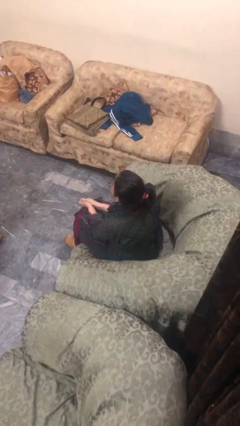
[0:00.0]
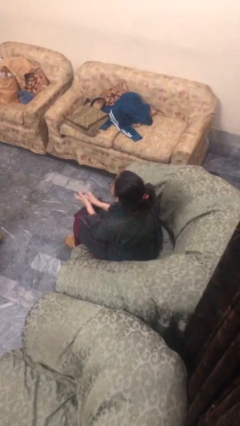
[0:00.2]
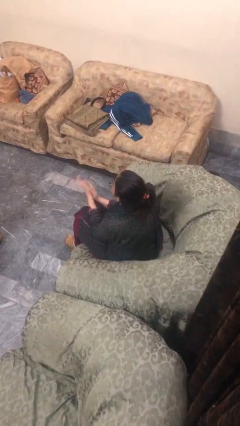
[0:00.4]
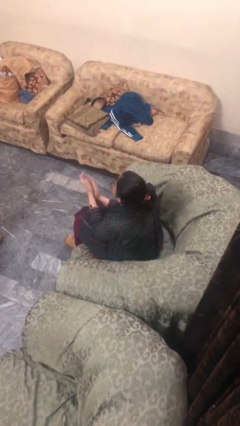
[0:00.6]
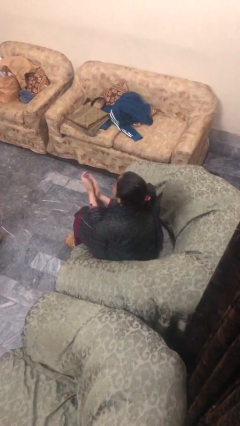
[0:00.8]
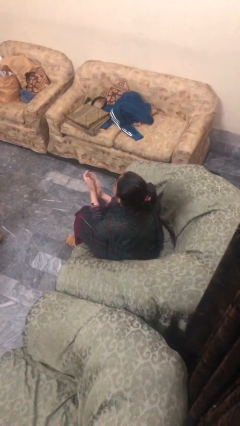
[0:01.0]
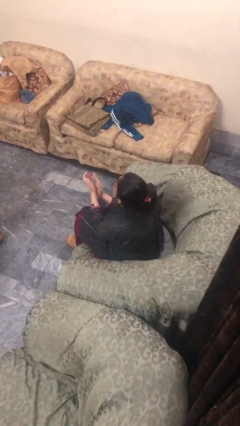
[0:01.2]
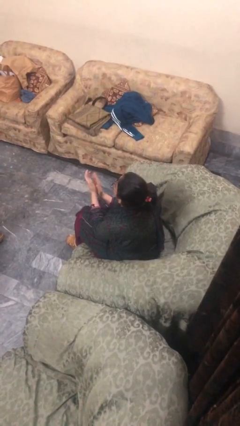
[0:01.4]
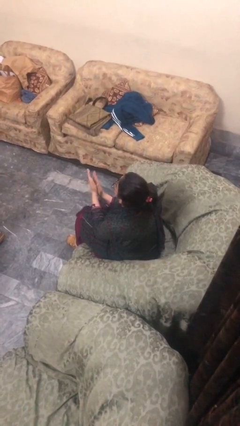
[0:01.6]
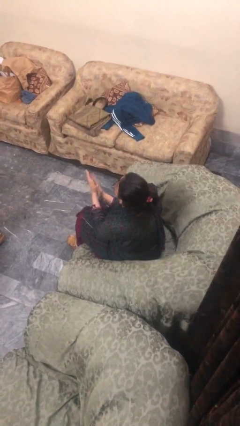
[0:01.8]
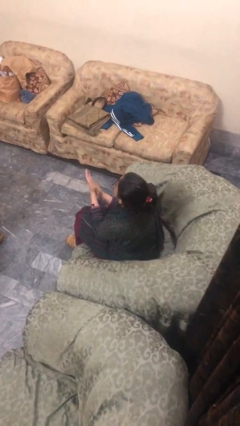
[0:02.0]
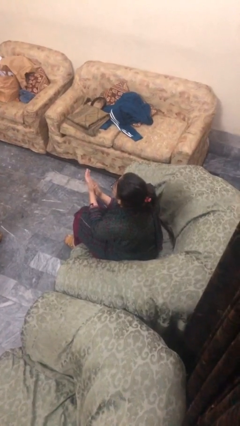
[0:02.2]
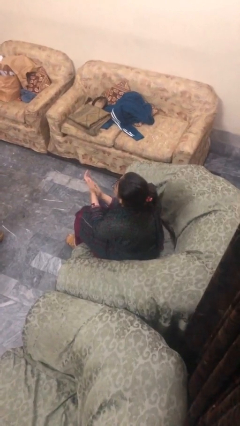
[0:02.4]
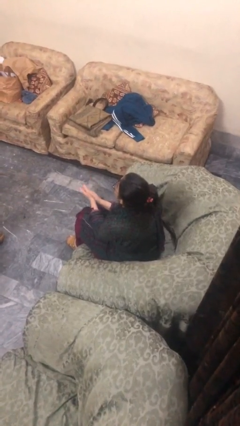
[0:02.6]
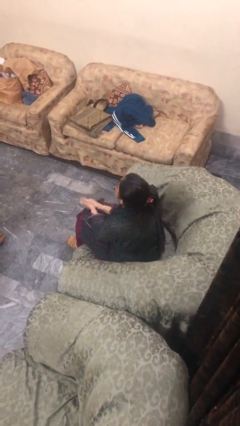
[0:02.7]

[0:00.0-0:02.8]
person claps hands

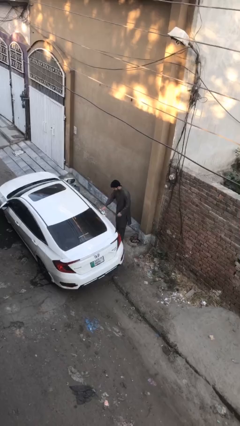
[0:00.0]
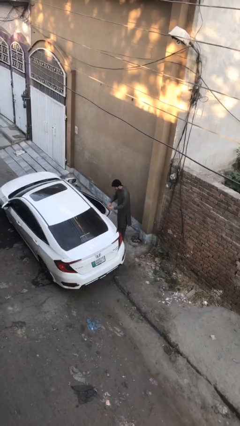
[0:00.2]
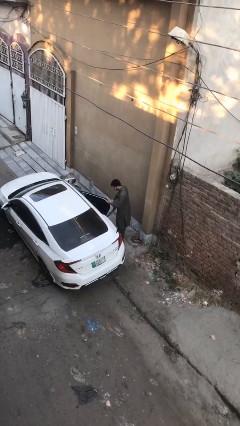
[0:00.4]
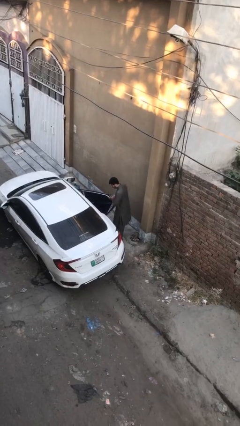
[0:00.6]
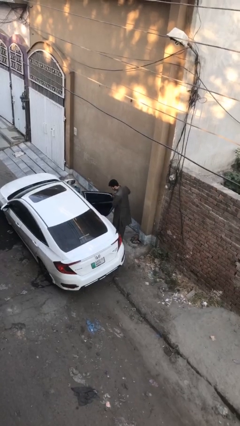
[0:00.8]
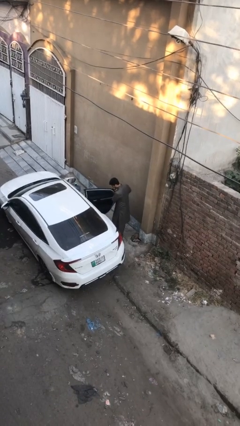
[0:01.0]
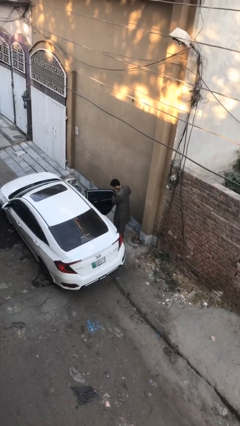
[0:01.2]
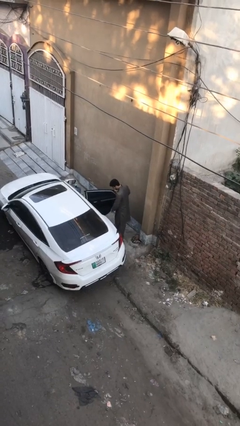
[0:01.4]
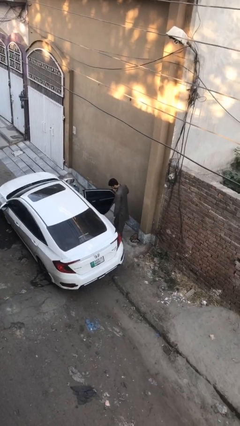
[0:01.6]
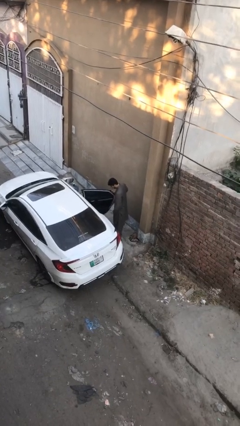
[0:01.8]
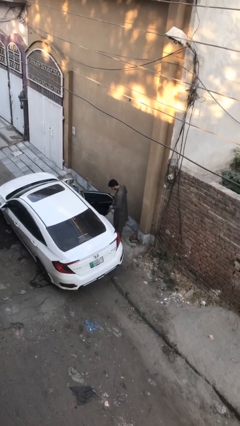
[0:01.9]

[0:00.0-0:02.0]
person opens car door

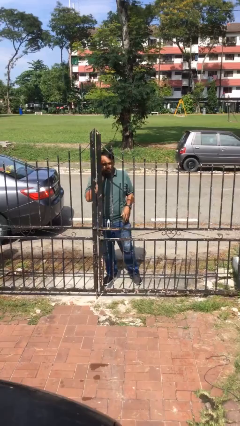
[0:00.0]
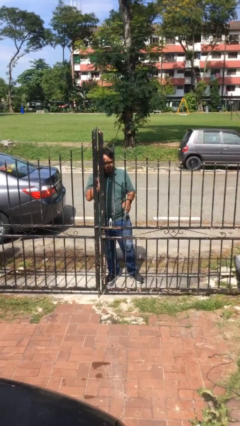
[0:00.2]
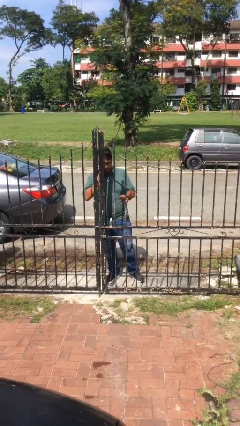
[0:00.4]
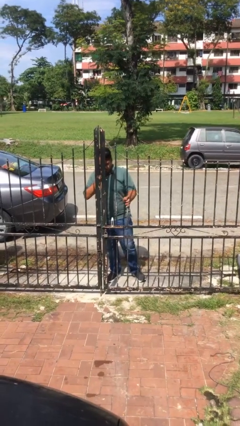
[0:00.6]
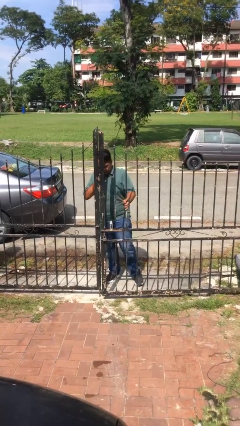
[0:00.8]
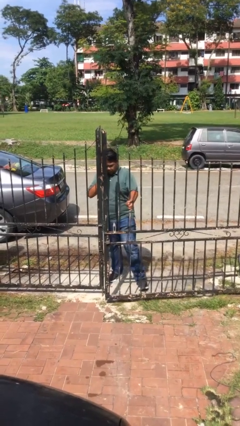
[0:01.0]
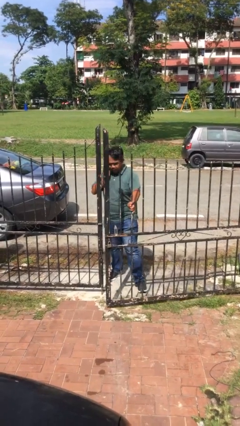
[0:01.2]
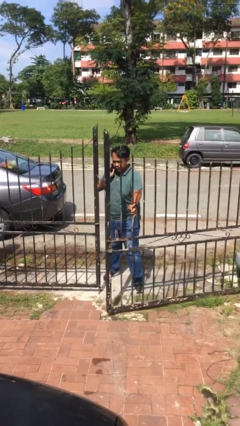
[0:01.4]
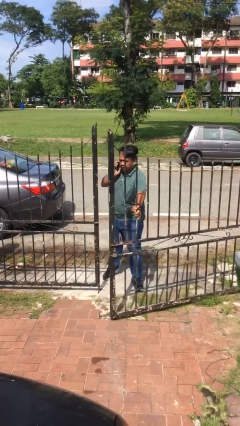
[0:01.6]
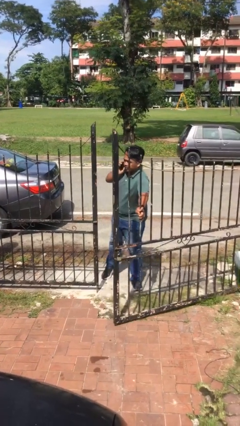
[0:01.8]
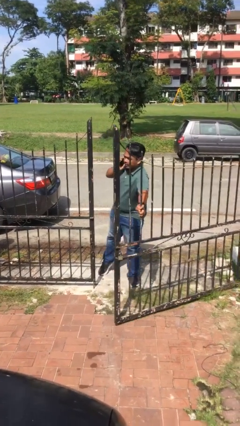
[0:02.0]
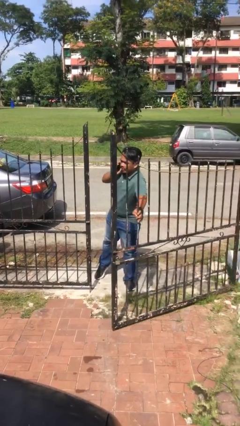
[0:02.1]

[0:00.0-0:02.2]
person opens facility door

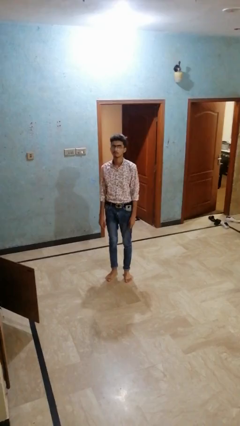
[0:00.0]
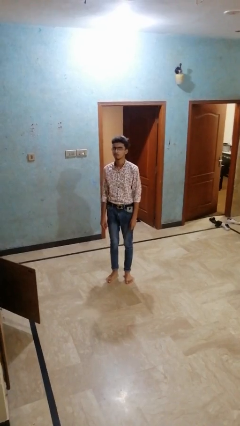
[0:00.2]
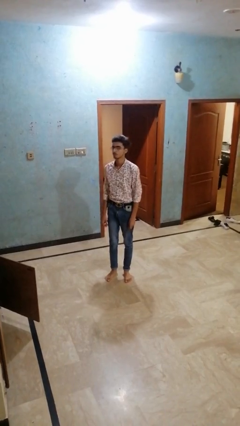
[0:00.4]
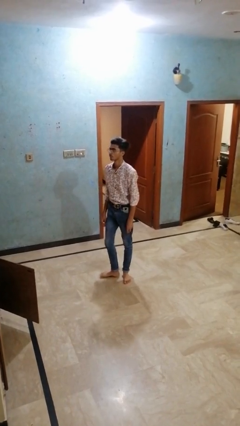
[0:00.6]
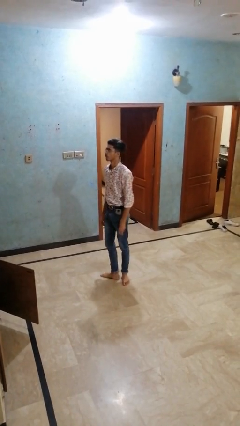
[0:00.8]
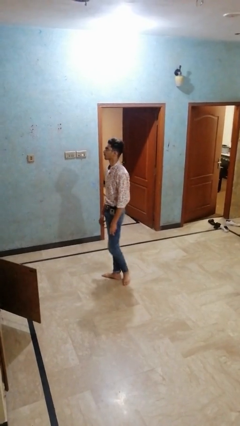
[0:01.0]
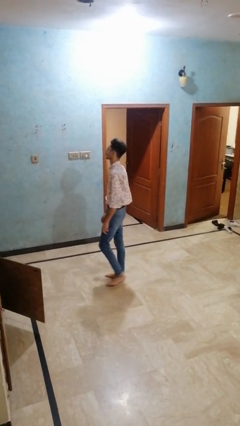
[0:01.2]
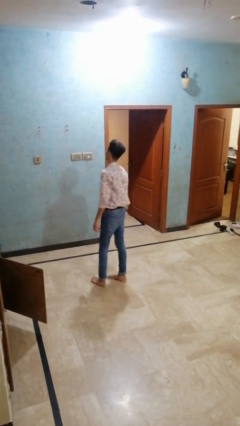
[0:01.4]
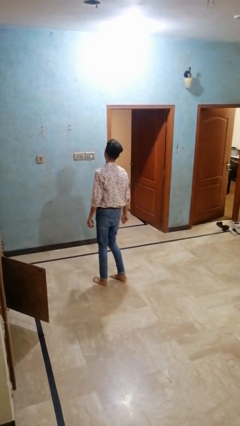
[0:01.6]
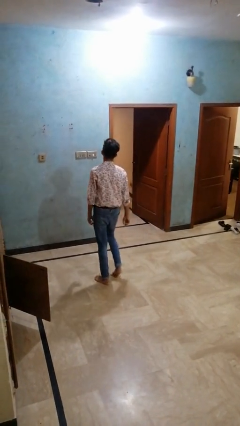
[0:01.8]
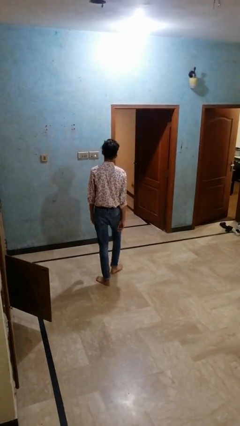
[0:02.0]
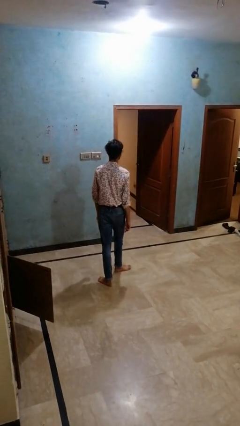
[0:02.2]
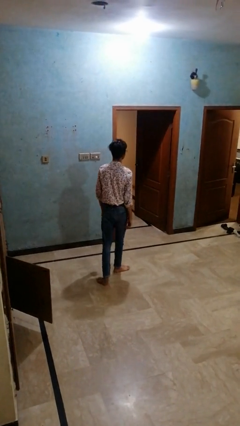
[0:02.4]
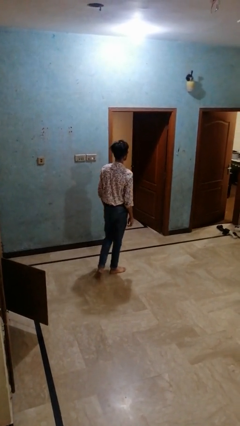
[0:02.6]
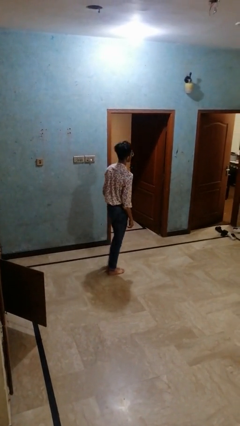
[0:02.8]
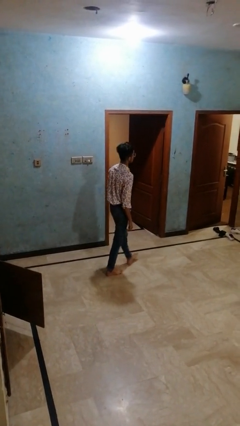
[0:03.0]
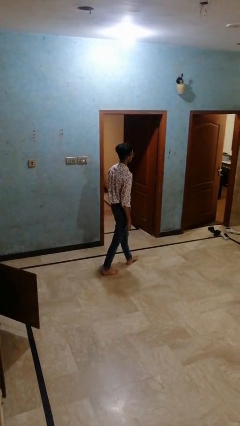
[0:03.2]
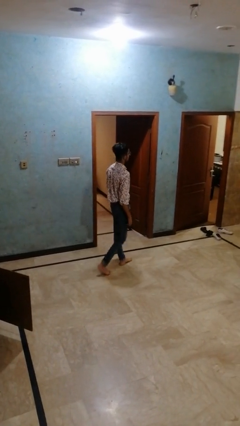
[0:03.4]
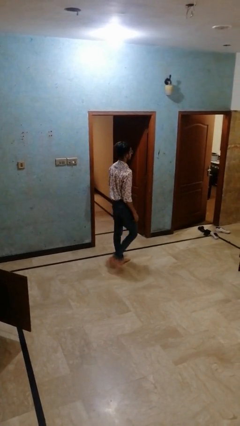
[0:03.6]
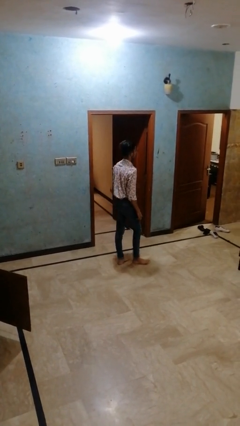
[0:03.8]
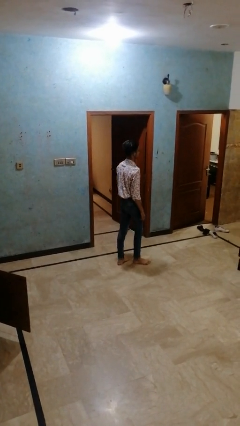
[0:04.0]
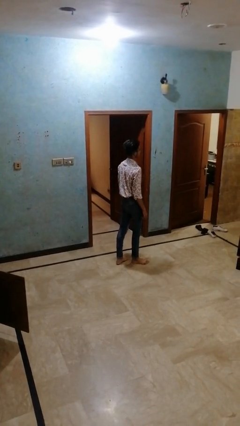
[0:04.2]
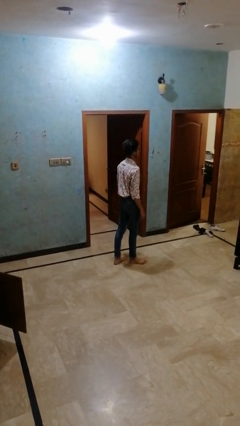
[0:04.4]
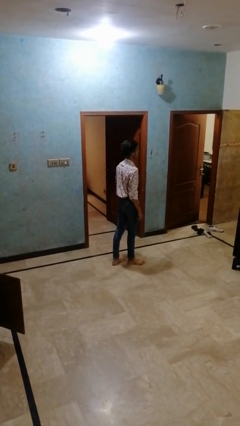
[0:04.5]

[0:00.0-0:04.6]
person twirls

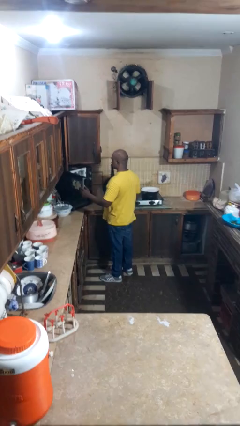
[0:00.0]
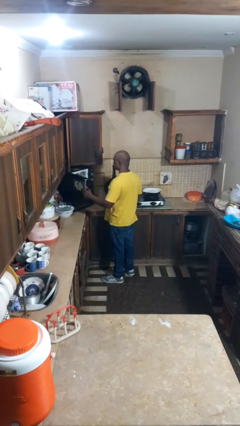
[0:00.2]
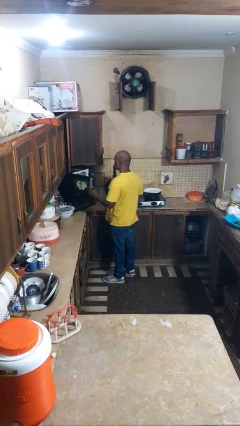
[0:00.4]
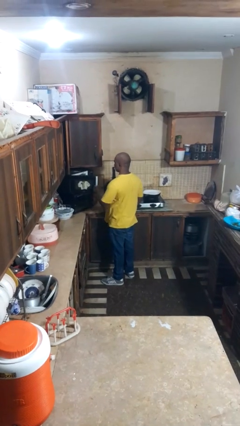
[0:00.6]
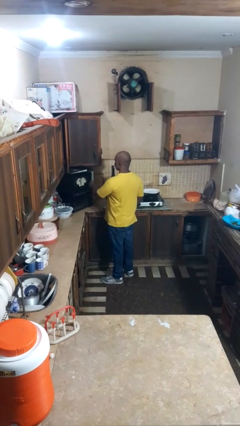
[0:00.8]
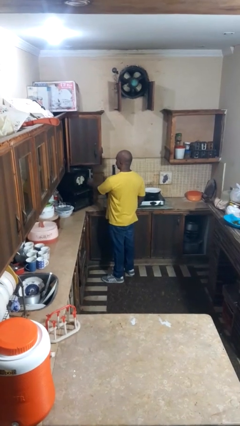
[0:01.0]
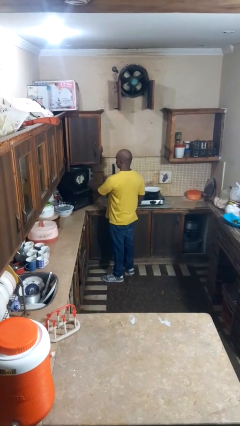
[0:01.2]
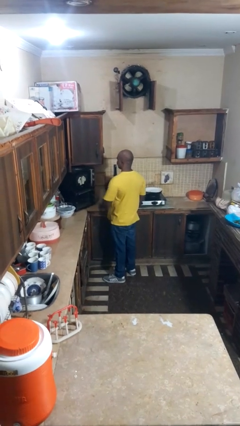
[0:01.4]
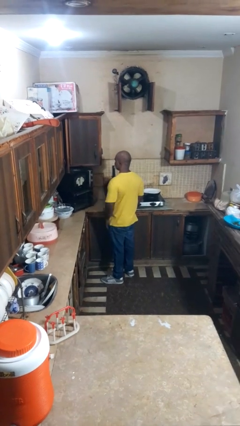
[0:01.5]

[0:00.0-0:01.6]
person closes microwave

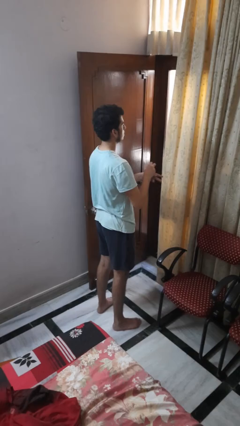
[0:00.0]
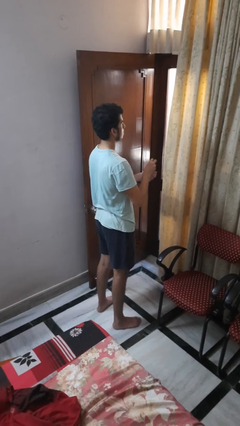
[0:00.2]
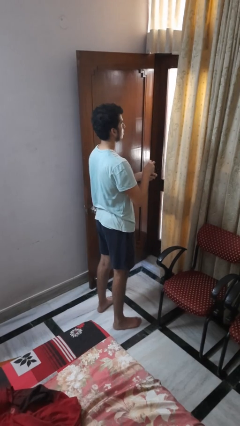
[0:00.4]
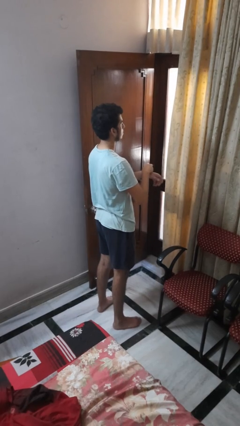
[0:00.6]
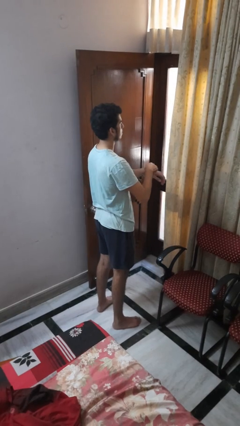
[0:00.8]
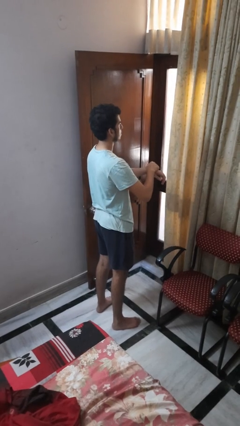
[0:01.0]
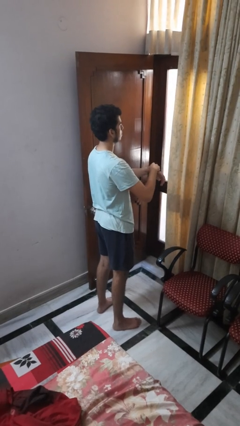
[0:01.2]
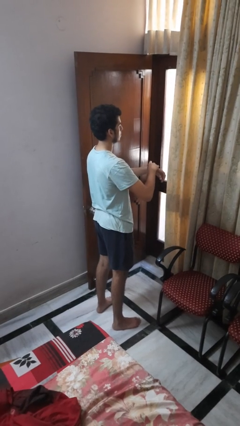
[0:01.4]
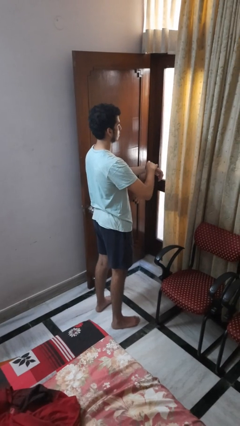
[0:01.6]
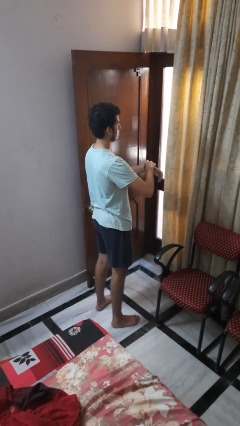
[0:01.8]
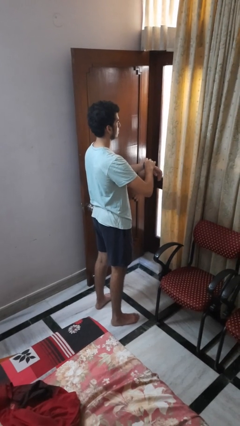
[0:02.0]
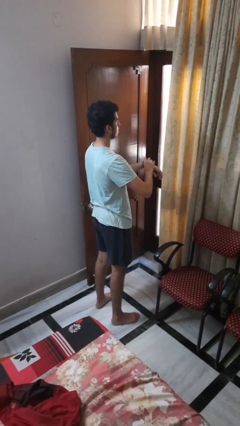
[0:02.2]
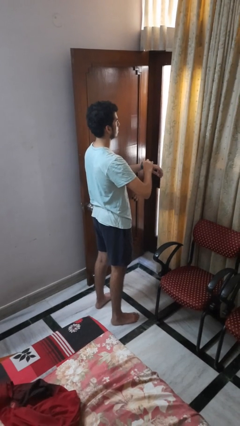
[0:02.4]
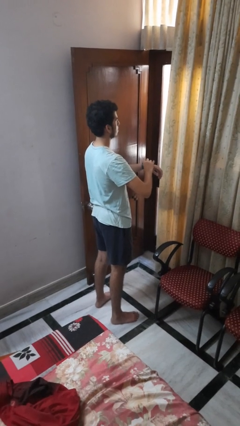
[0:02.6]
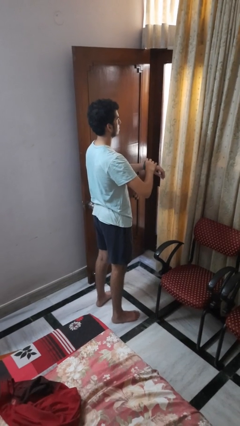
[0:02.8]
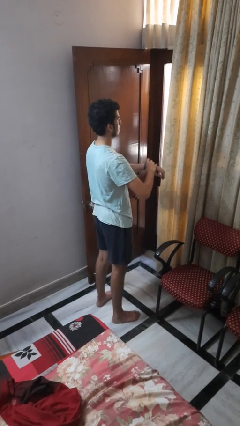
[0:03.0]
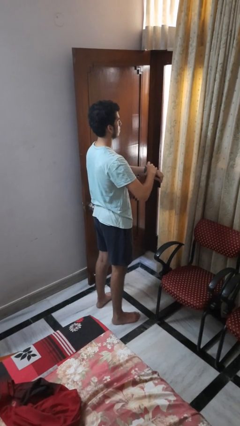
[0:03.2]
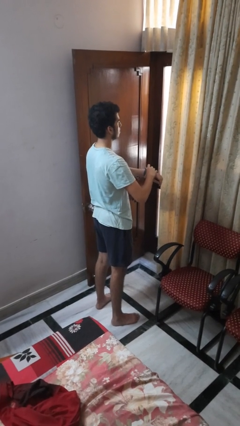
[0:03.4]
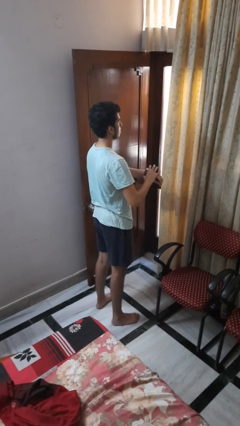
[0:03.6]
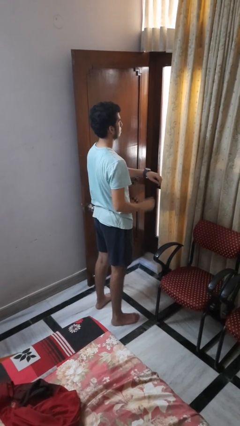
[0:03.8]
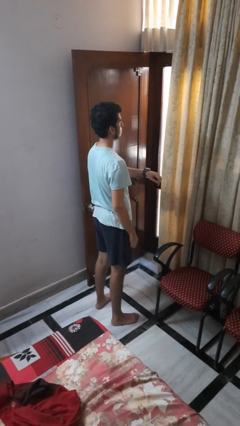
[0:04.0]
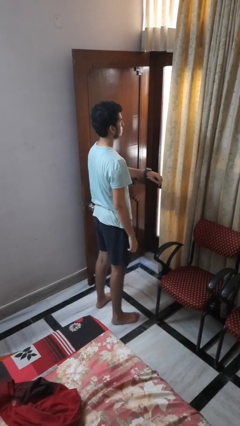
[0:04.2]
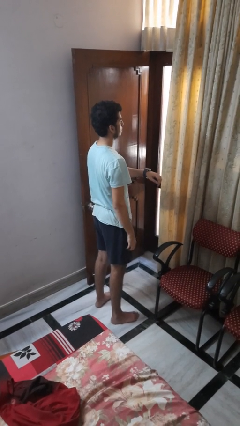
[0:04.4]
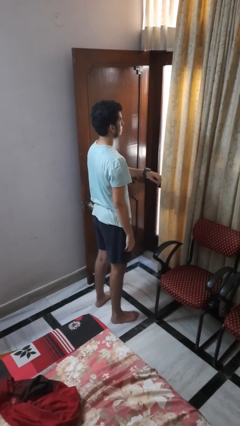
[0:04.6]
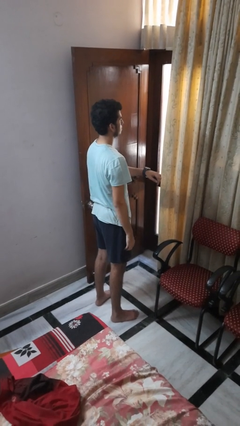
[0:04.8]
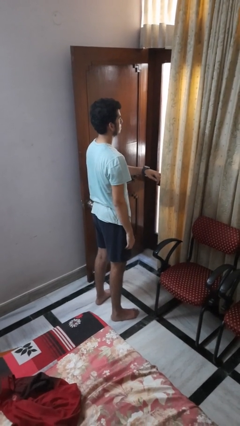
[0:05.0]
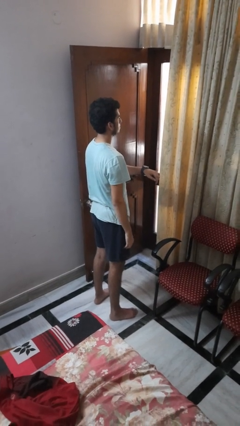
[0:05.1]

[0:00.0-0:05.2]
person puts on wristwatch
